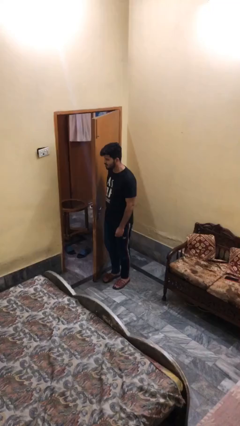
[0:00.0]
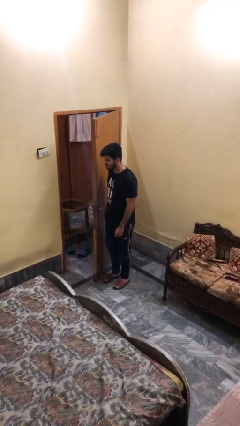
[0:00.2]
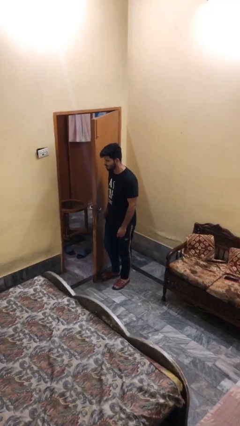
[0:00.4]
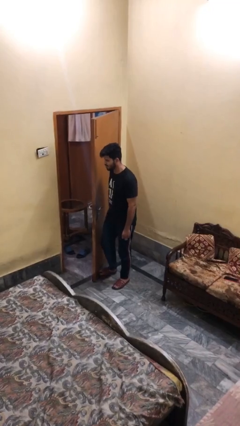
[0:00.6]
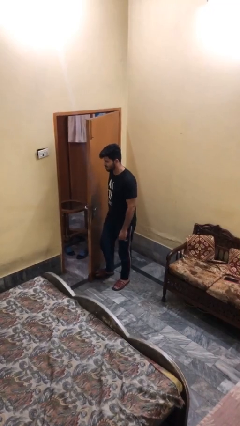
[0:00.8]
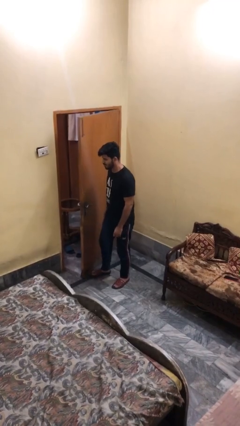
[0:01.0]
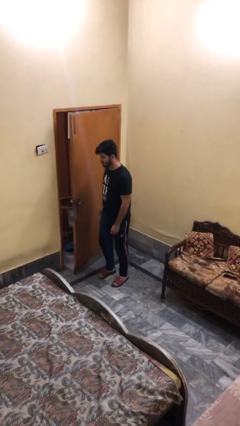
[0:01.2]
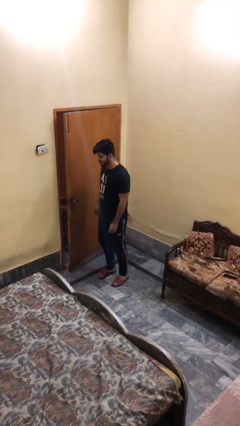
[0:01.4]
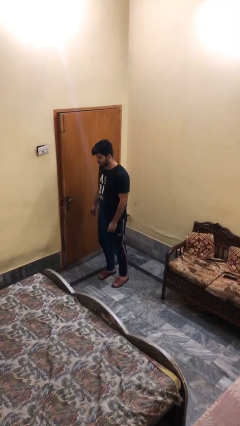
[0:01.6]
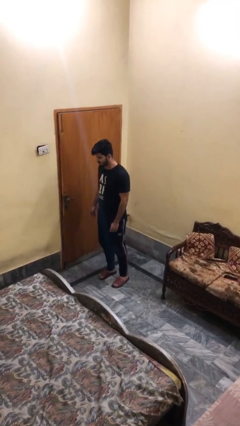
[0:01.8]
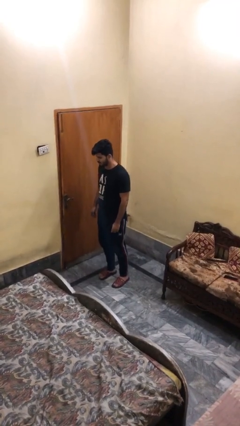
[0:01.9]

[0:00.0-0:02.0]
person closes door with foot

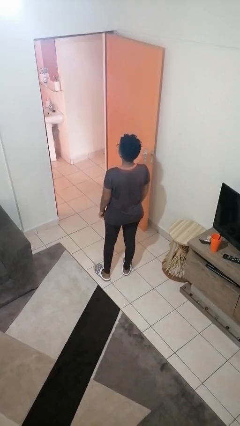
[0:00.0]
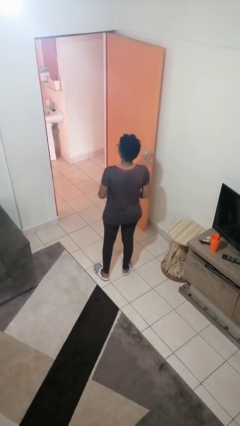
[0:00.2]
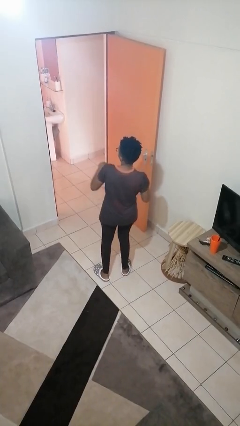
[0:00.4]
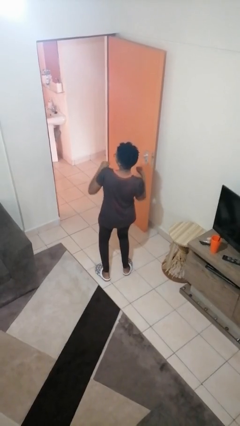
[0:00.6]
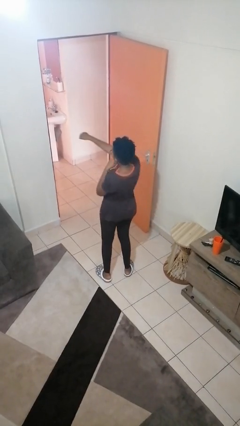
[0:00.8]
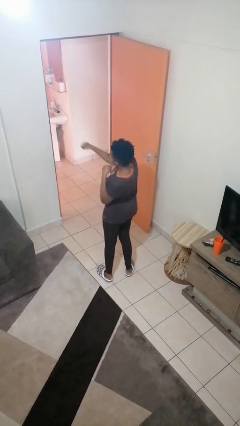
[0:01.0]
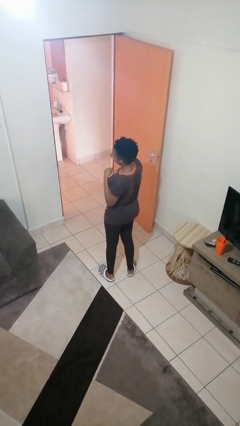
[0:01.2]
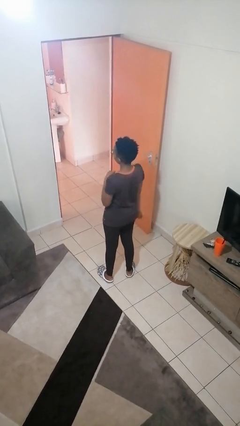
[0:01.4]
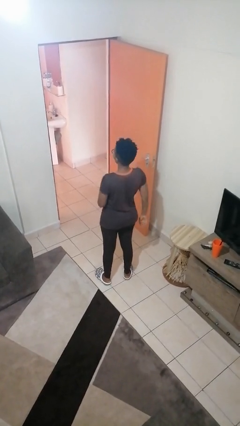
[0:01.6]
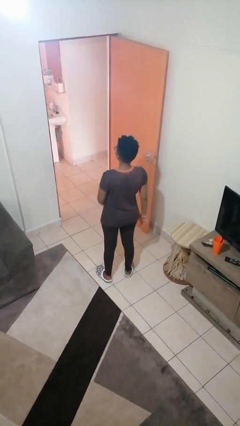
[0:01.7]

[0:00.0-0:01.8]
person punches

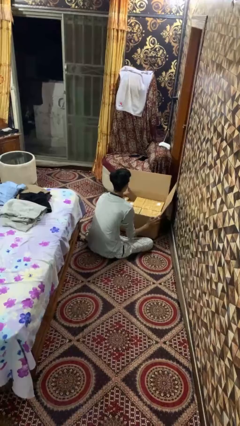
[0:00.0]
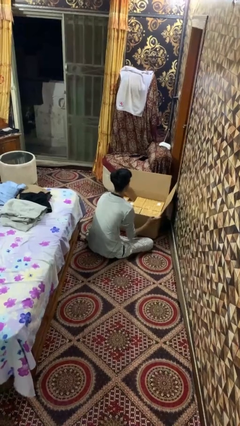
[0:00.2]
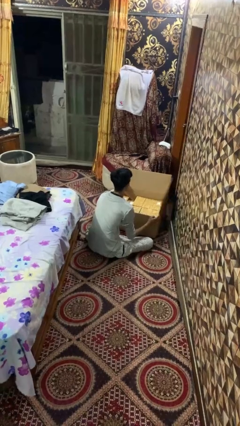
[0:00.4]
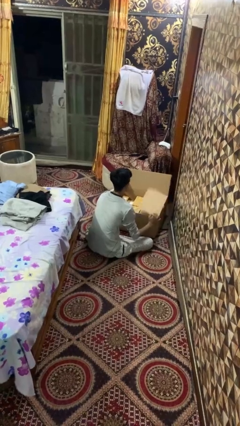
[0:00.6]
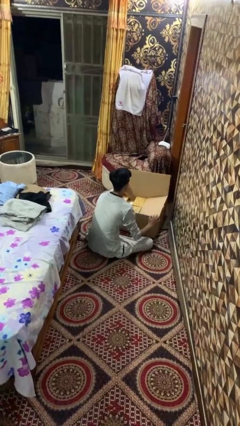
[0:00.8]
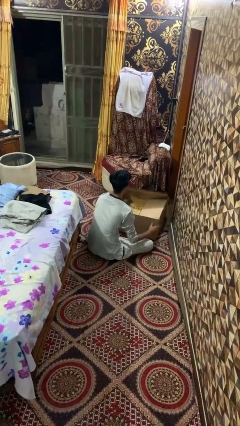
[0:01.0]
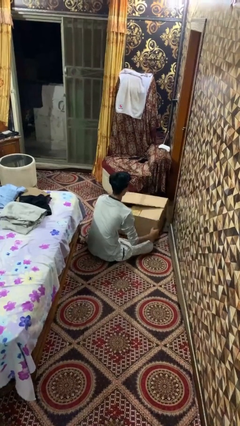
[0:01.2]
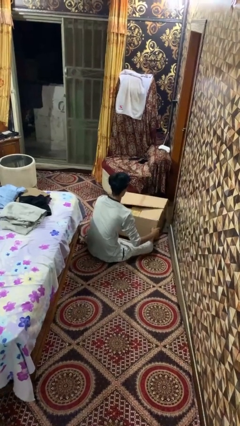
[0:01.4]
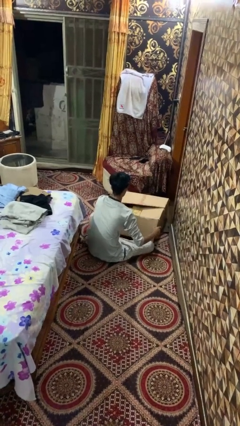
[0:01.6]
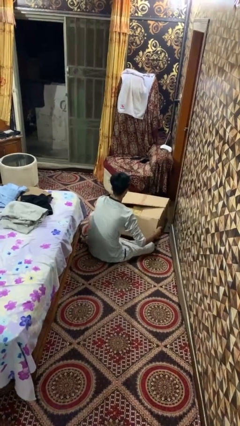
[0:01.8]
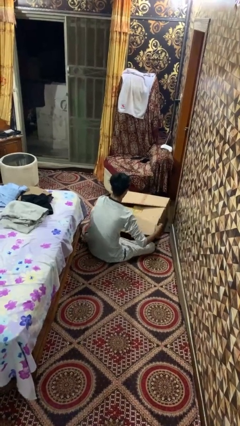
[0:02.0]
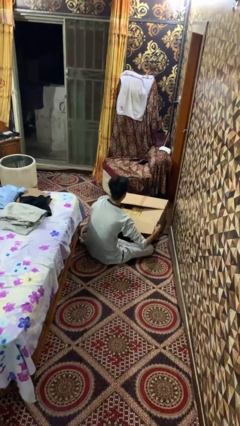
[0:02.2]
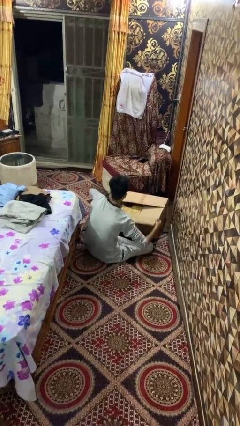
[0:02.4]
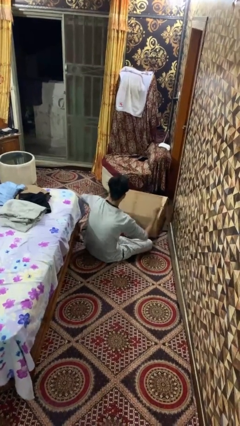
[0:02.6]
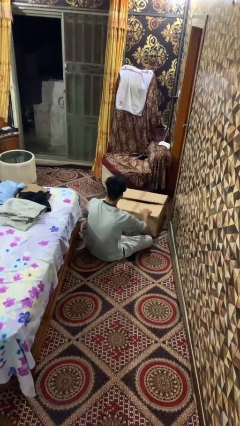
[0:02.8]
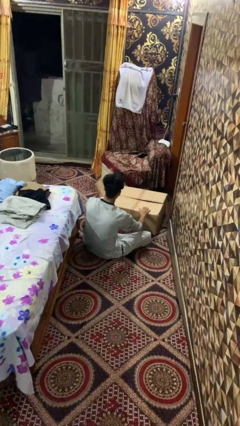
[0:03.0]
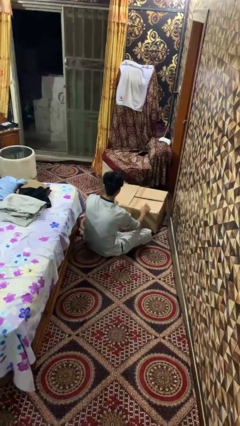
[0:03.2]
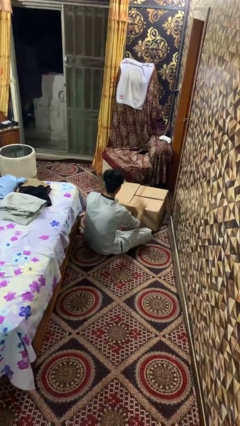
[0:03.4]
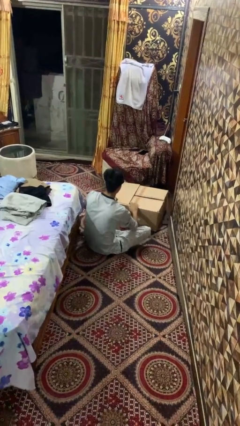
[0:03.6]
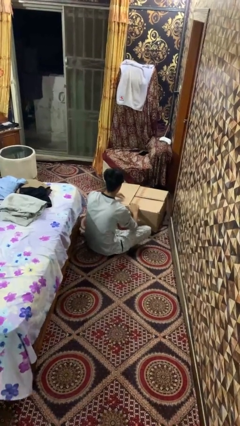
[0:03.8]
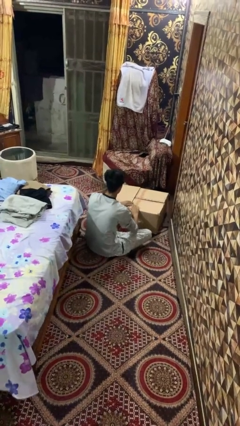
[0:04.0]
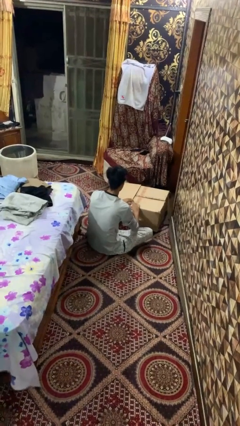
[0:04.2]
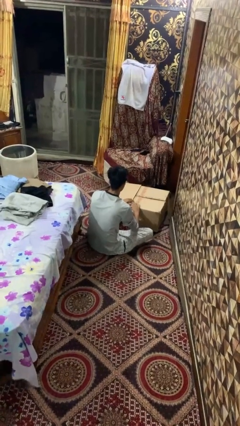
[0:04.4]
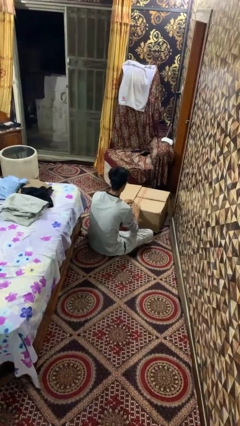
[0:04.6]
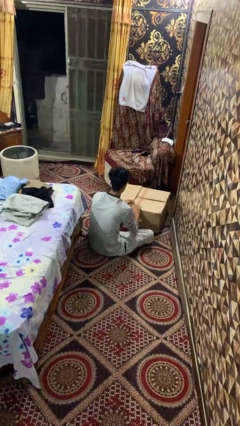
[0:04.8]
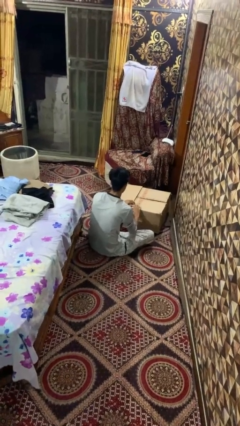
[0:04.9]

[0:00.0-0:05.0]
person closes box

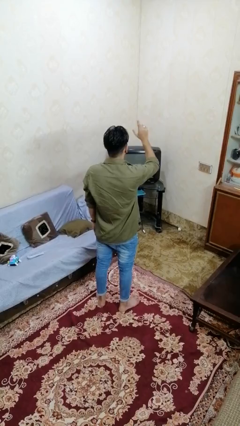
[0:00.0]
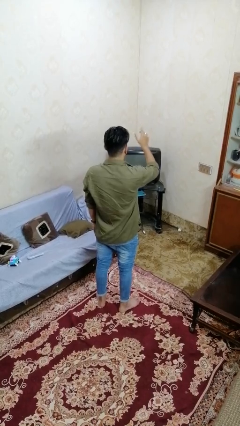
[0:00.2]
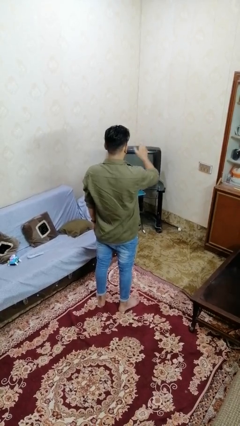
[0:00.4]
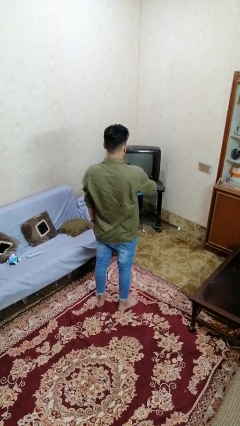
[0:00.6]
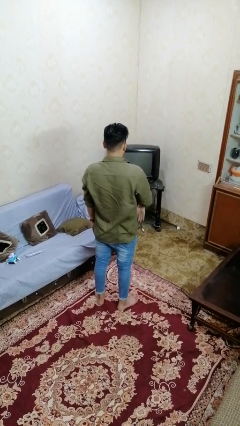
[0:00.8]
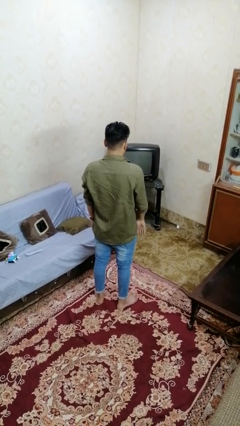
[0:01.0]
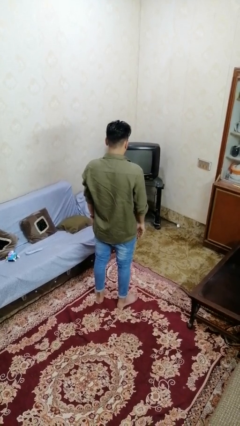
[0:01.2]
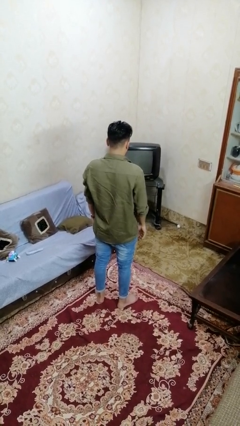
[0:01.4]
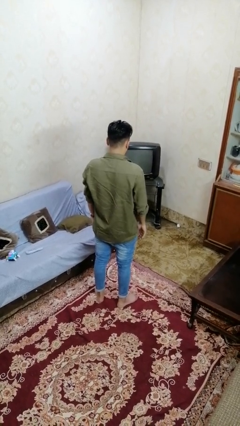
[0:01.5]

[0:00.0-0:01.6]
person gestures lower hand

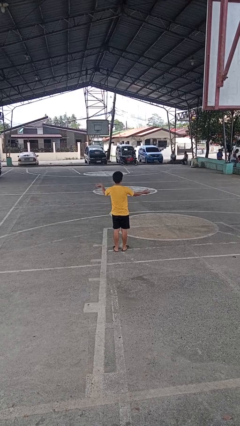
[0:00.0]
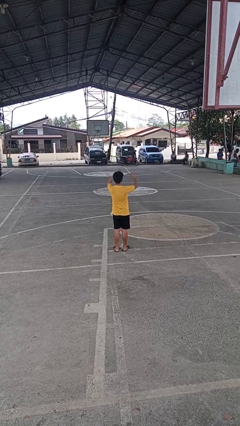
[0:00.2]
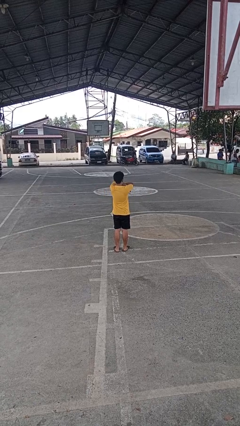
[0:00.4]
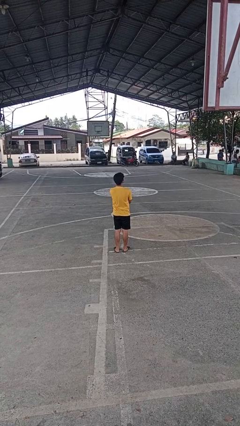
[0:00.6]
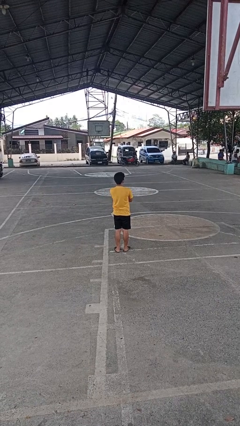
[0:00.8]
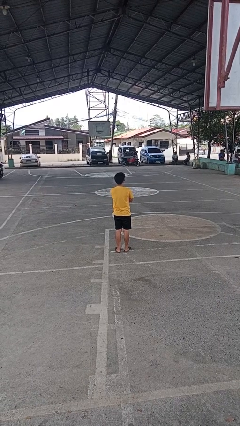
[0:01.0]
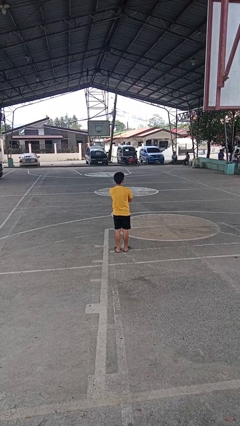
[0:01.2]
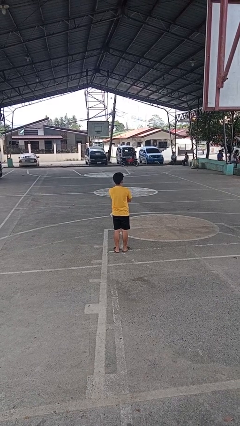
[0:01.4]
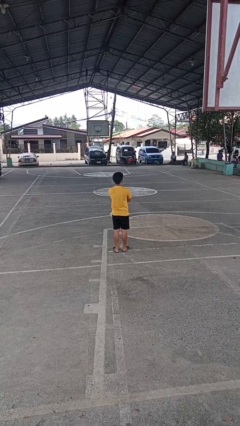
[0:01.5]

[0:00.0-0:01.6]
person crosses arms

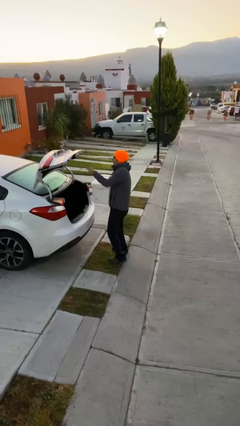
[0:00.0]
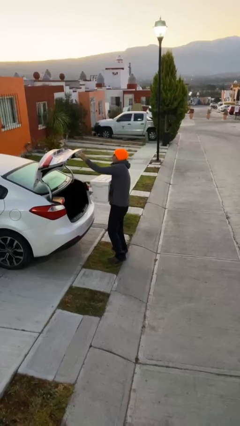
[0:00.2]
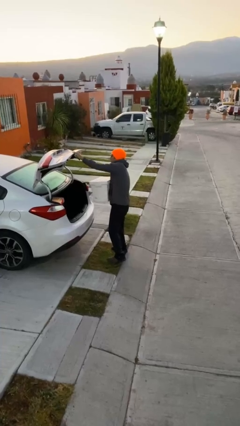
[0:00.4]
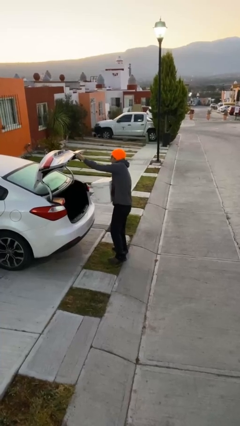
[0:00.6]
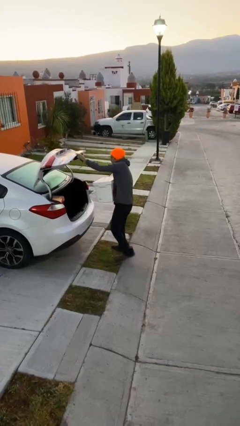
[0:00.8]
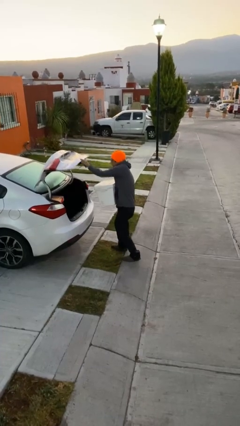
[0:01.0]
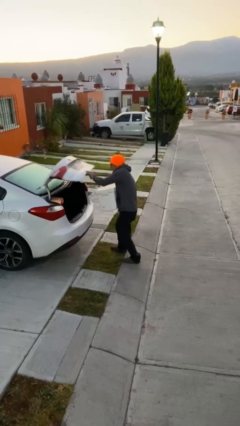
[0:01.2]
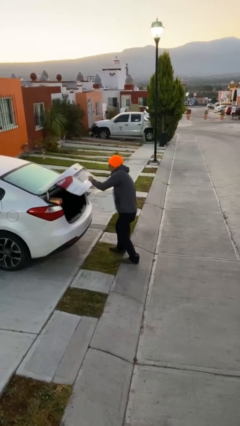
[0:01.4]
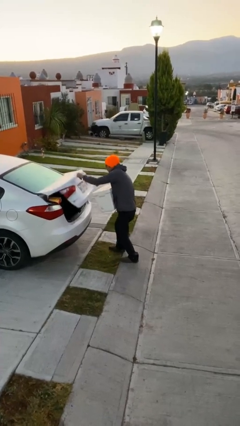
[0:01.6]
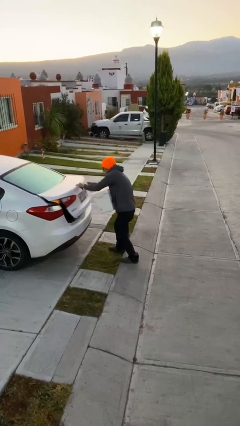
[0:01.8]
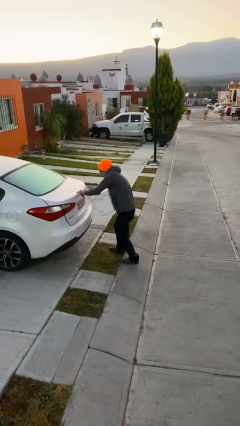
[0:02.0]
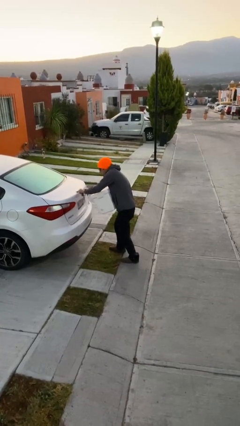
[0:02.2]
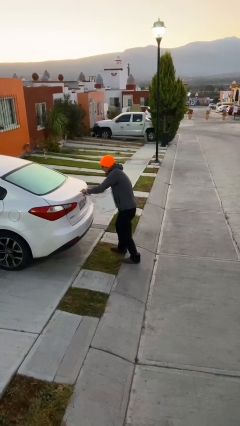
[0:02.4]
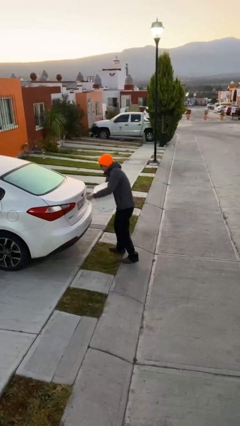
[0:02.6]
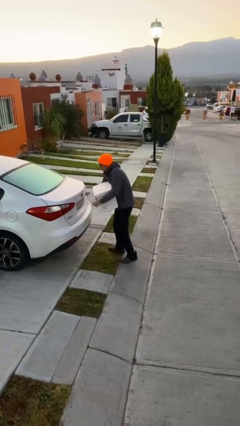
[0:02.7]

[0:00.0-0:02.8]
person closes car trunk

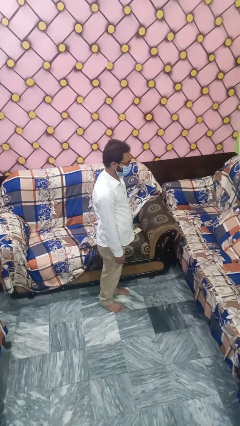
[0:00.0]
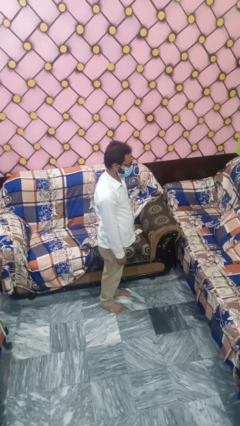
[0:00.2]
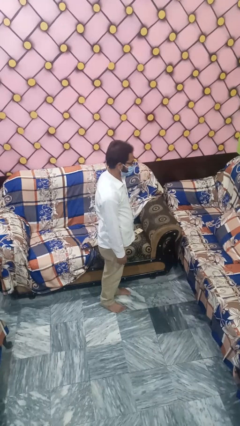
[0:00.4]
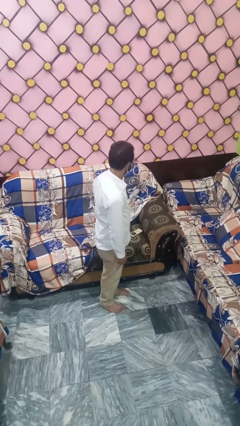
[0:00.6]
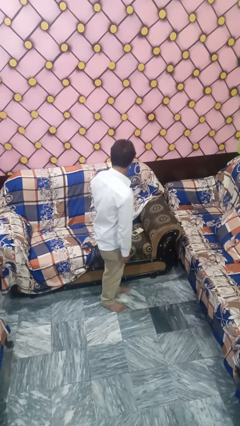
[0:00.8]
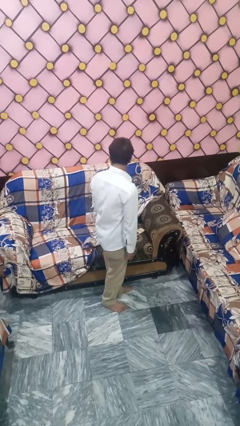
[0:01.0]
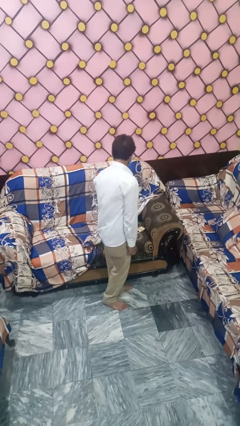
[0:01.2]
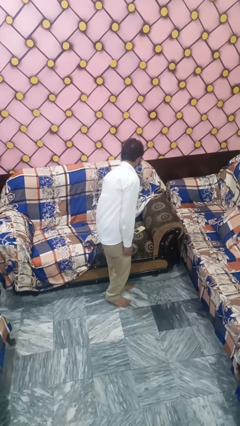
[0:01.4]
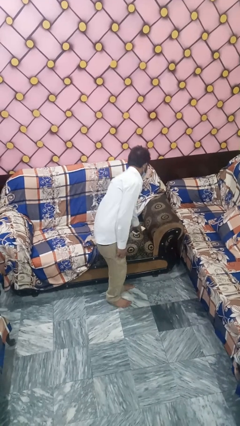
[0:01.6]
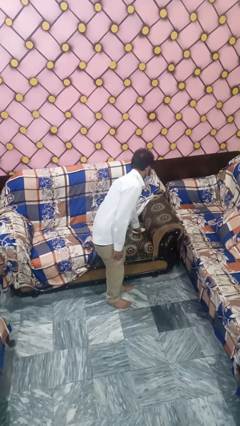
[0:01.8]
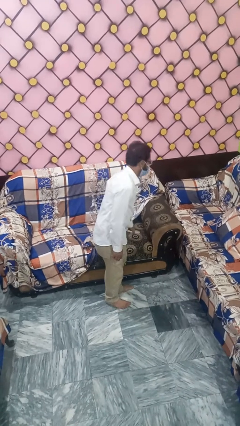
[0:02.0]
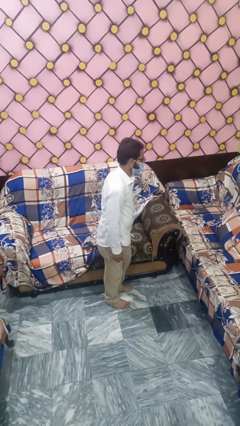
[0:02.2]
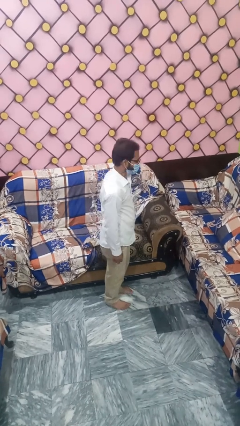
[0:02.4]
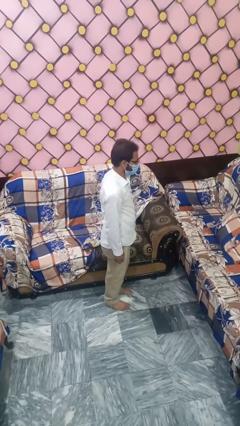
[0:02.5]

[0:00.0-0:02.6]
person searches under couch
